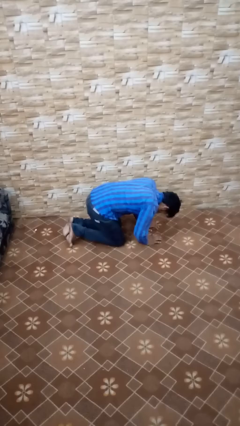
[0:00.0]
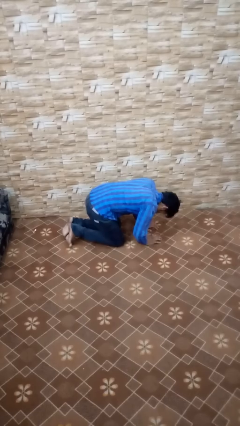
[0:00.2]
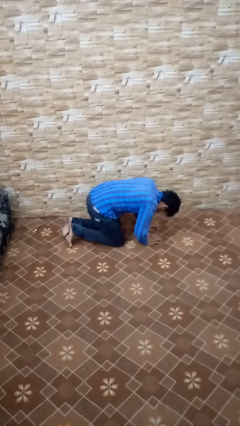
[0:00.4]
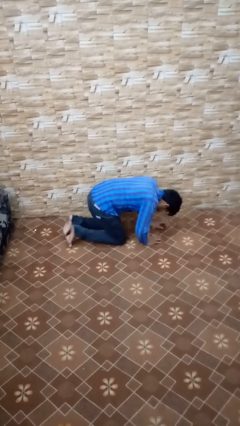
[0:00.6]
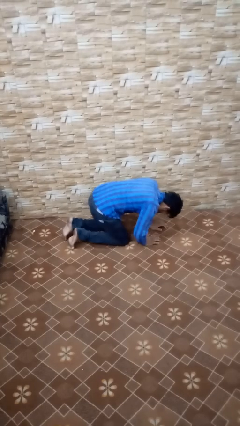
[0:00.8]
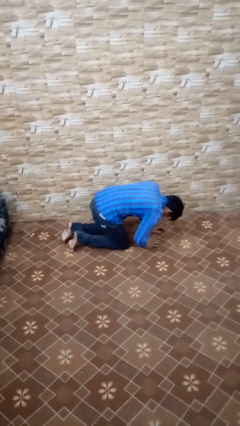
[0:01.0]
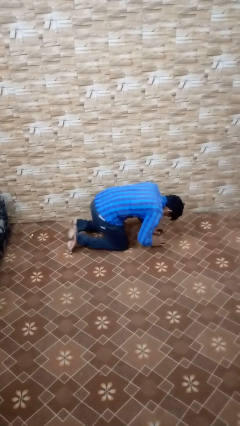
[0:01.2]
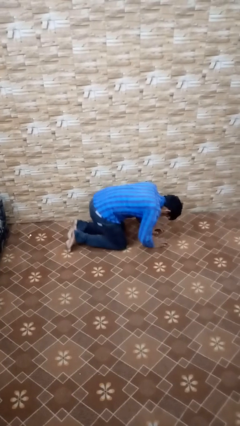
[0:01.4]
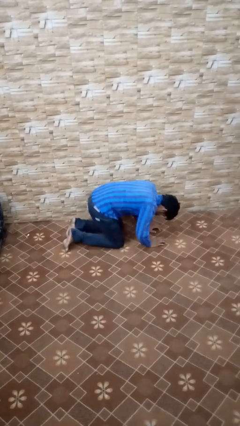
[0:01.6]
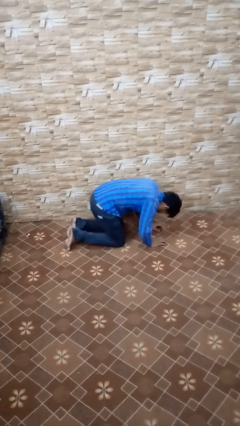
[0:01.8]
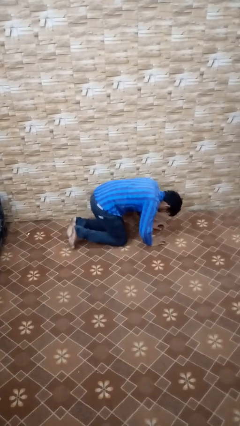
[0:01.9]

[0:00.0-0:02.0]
person crawls

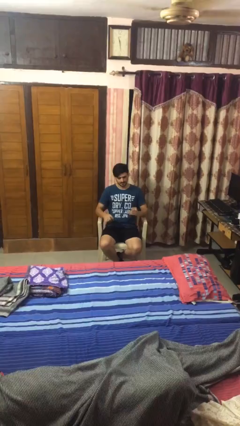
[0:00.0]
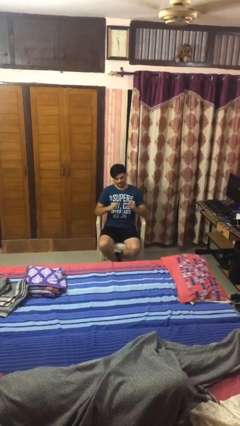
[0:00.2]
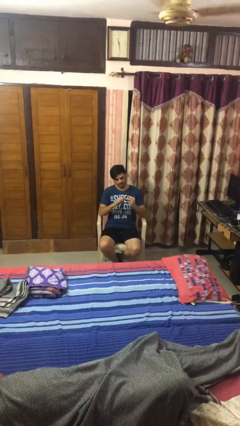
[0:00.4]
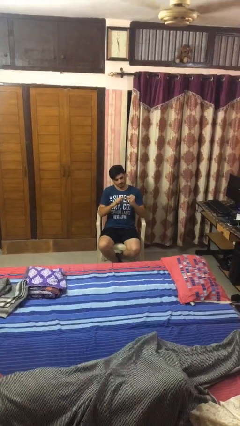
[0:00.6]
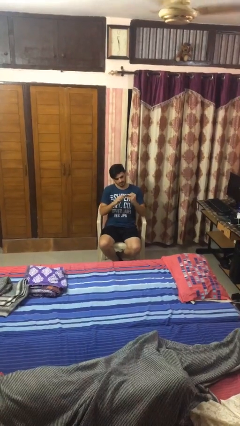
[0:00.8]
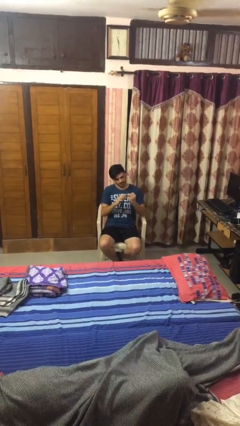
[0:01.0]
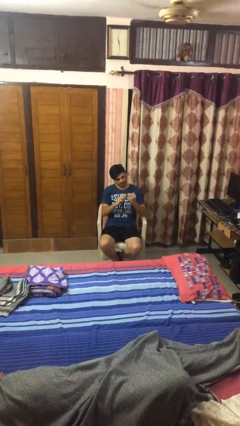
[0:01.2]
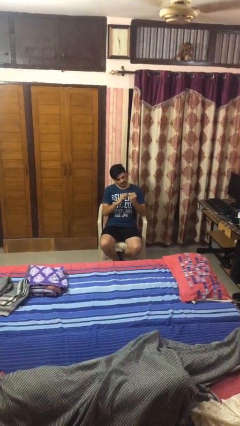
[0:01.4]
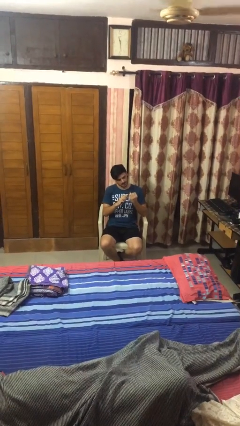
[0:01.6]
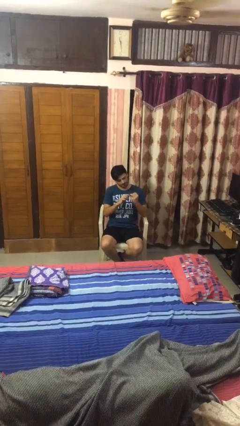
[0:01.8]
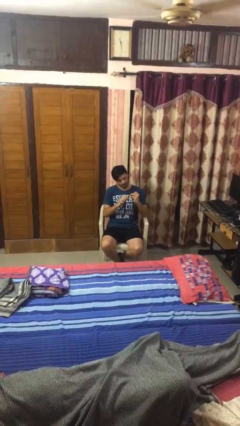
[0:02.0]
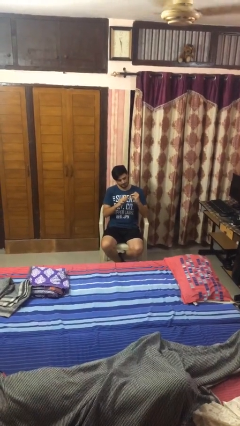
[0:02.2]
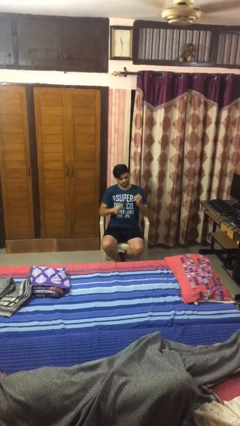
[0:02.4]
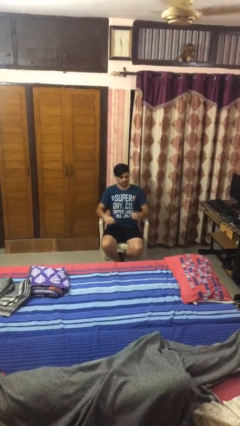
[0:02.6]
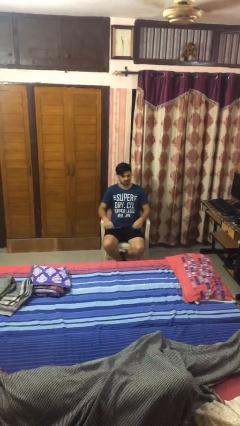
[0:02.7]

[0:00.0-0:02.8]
person files fingernails

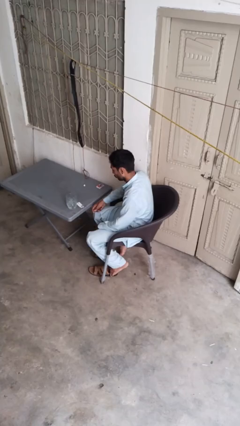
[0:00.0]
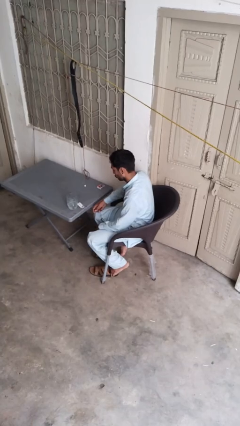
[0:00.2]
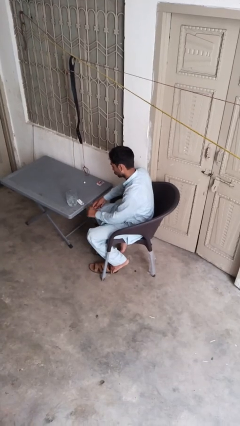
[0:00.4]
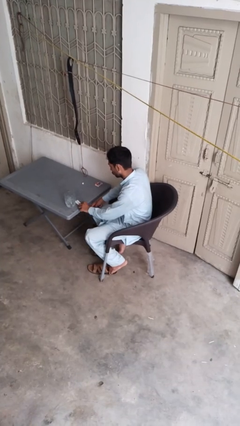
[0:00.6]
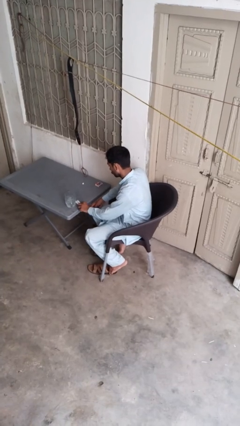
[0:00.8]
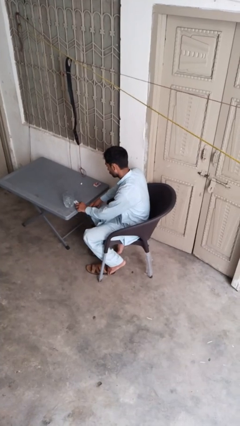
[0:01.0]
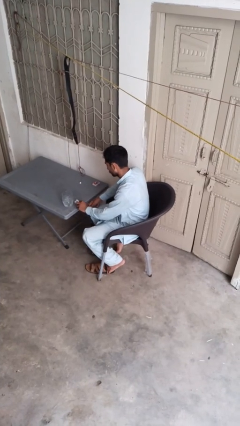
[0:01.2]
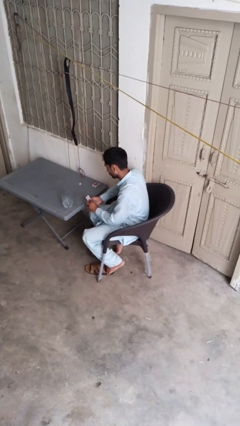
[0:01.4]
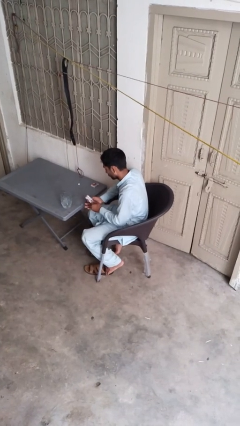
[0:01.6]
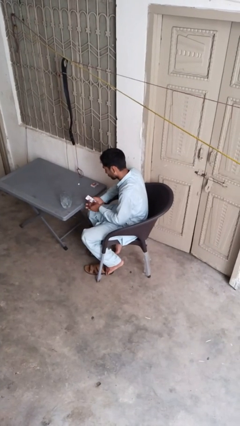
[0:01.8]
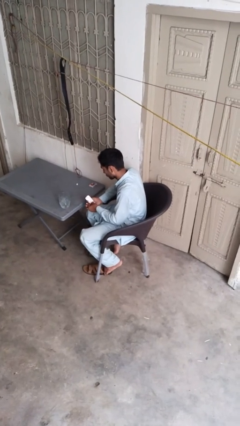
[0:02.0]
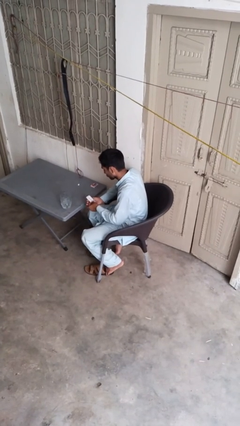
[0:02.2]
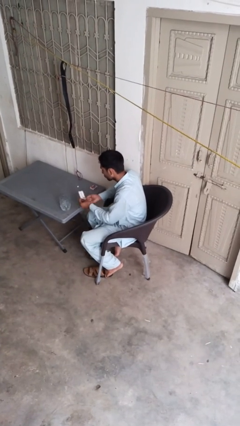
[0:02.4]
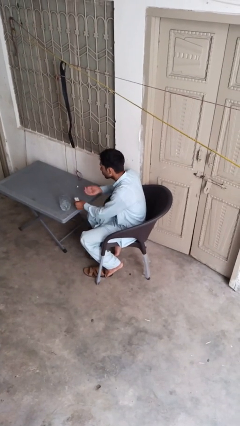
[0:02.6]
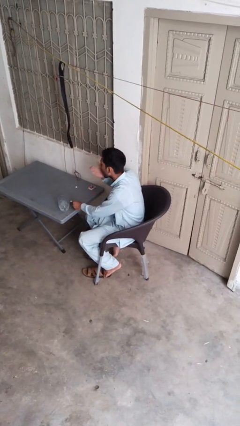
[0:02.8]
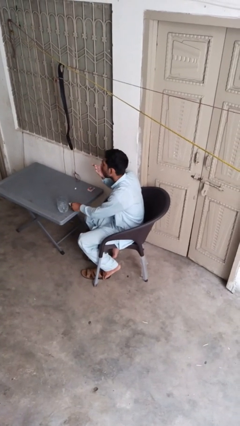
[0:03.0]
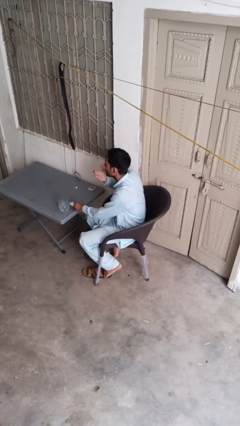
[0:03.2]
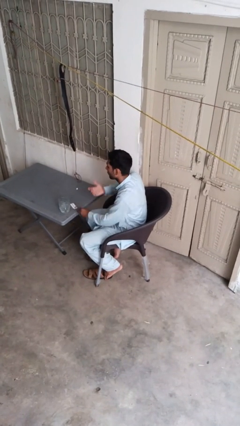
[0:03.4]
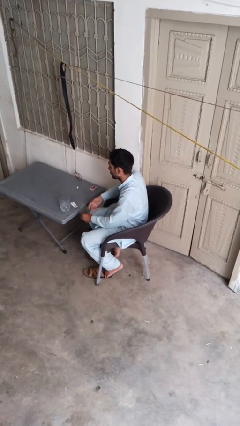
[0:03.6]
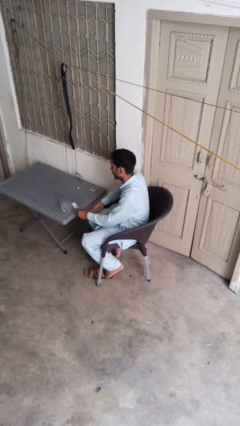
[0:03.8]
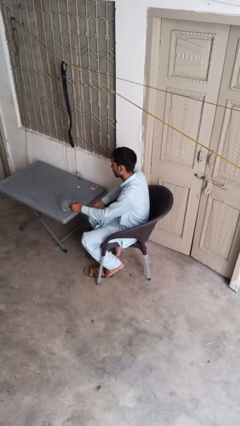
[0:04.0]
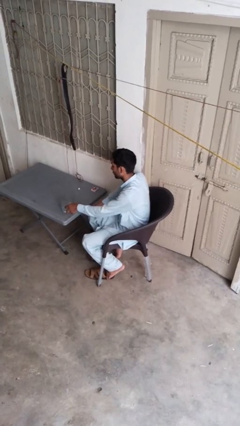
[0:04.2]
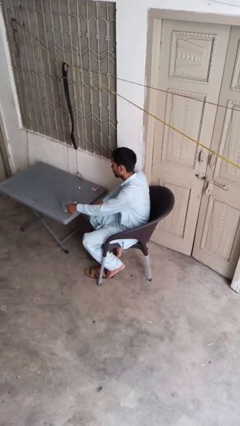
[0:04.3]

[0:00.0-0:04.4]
person takes medicine pills

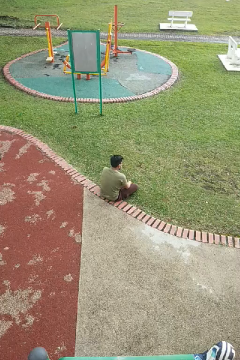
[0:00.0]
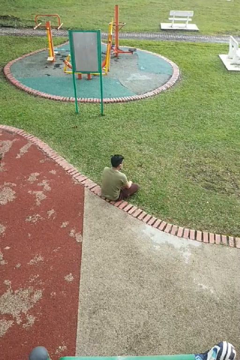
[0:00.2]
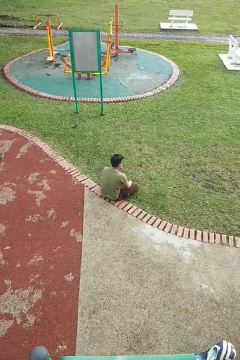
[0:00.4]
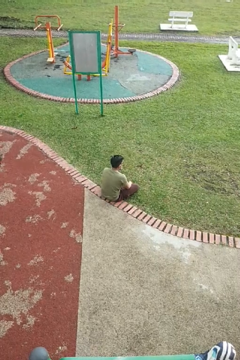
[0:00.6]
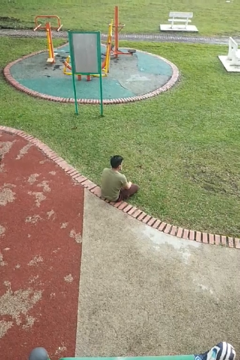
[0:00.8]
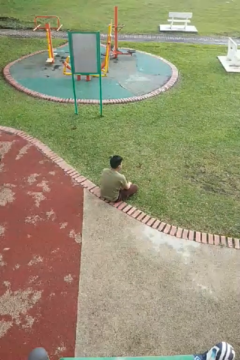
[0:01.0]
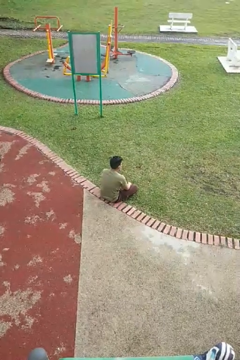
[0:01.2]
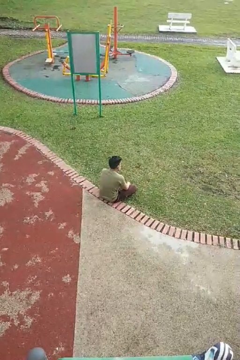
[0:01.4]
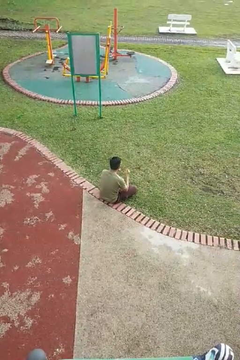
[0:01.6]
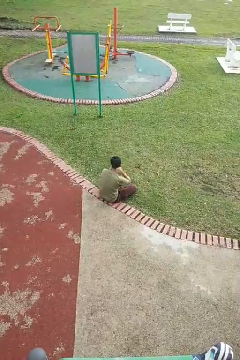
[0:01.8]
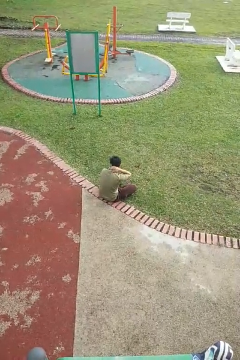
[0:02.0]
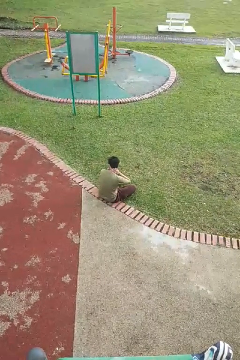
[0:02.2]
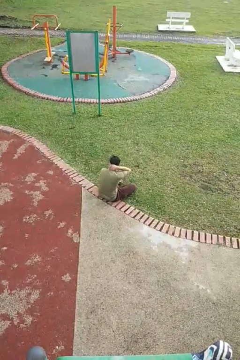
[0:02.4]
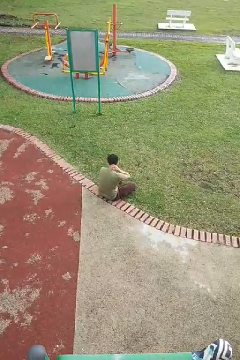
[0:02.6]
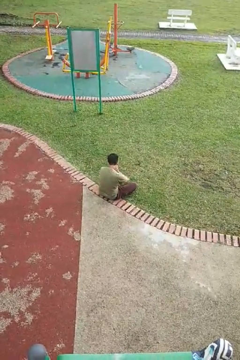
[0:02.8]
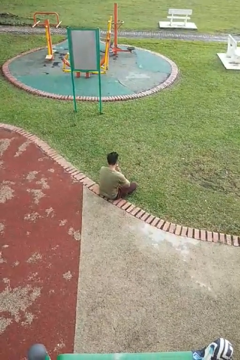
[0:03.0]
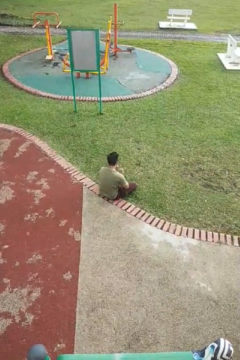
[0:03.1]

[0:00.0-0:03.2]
person rubs neck

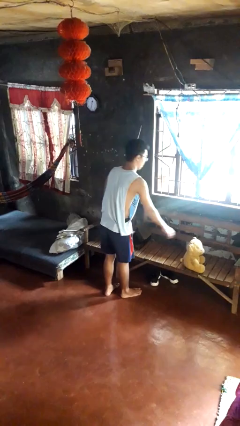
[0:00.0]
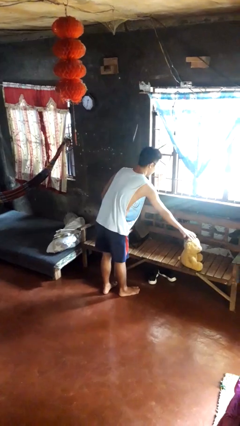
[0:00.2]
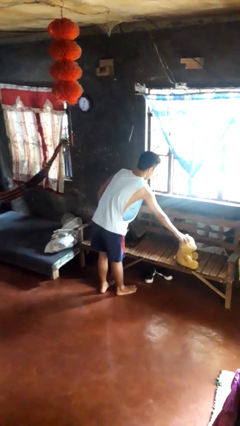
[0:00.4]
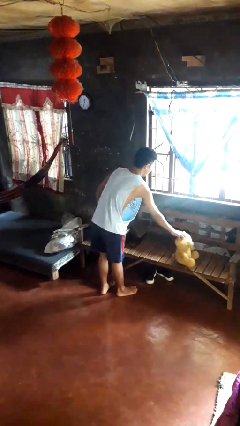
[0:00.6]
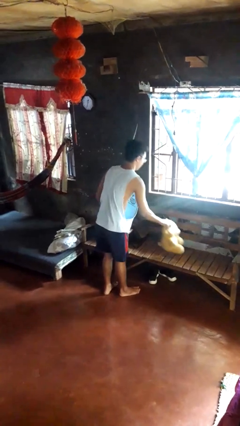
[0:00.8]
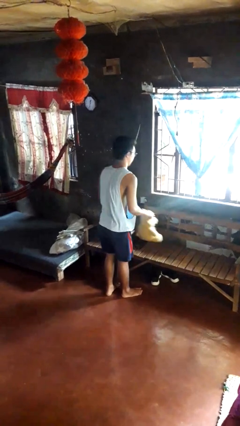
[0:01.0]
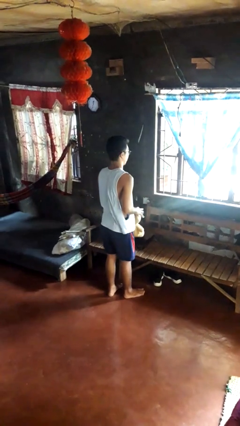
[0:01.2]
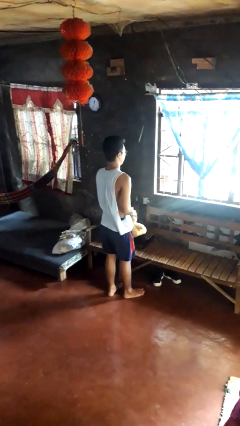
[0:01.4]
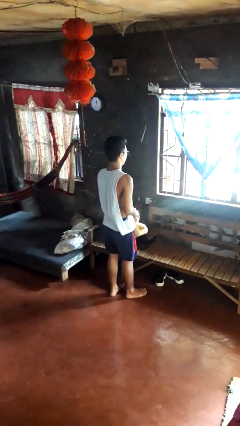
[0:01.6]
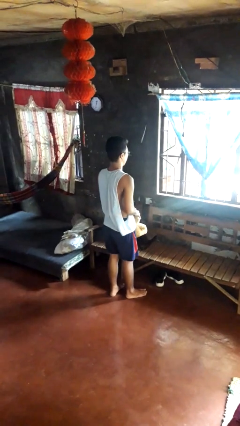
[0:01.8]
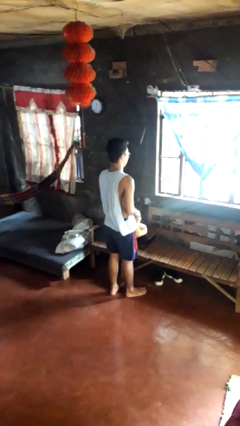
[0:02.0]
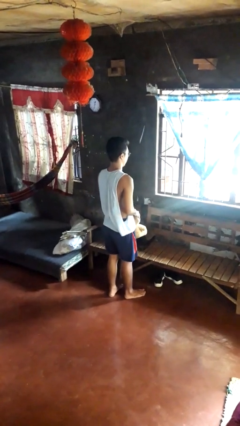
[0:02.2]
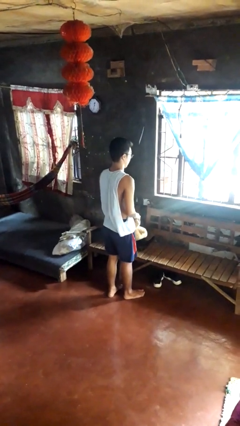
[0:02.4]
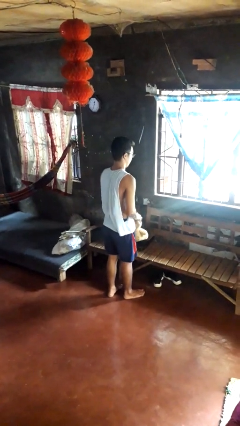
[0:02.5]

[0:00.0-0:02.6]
person picks up object from couch

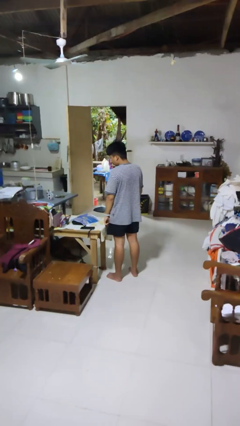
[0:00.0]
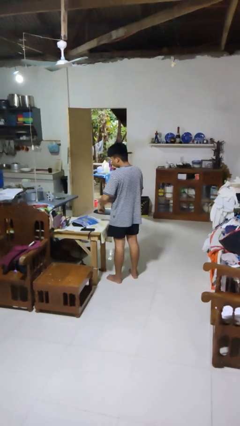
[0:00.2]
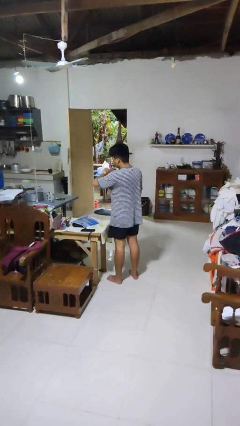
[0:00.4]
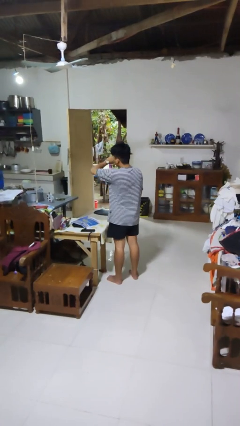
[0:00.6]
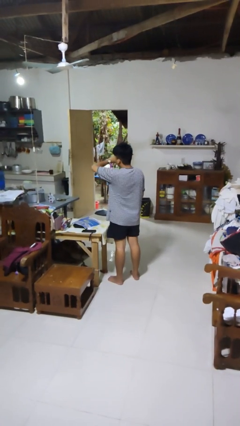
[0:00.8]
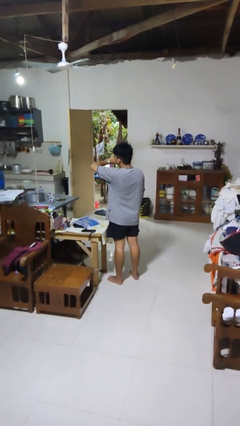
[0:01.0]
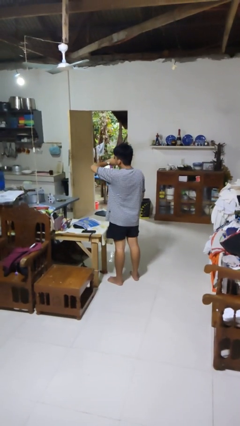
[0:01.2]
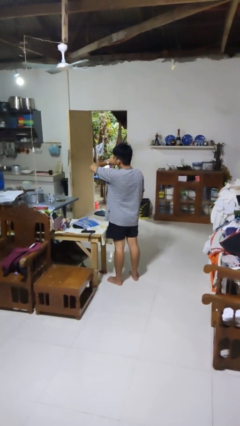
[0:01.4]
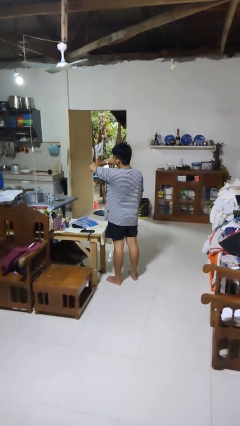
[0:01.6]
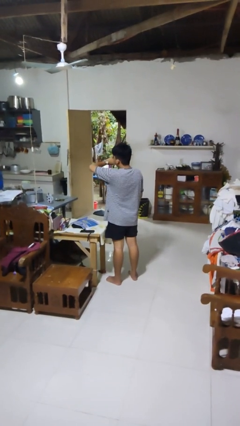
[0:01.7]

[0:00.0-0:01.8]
person looks at wristwatch

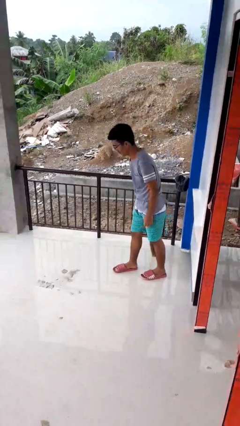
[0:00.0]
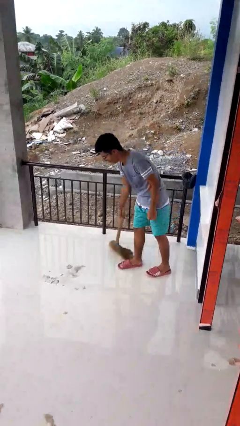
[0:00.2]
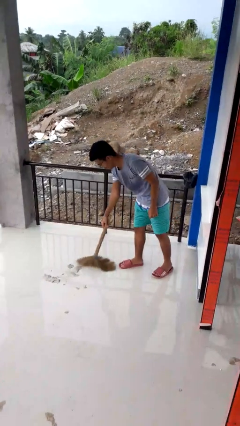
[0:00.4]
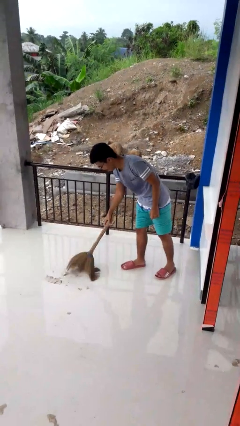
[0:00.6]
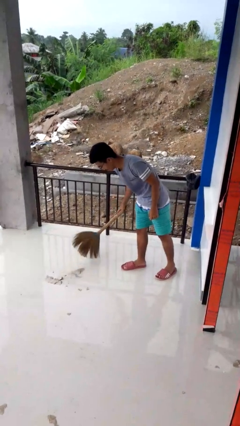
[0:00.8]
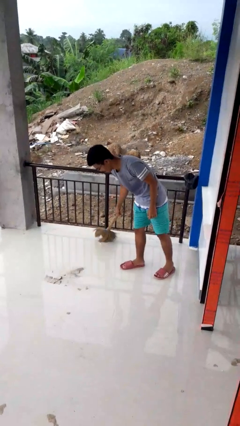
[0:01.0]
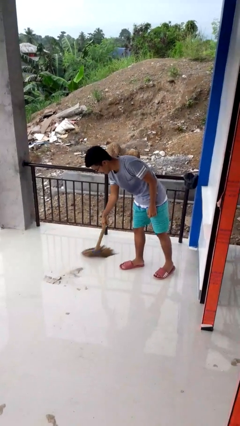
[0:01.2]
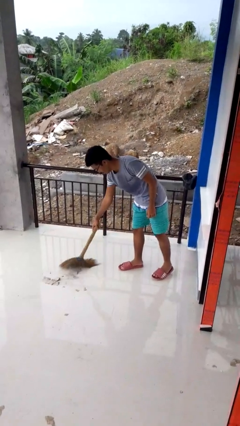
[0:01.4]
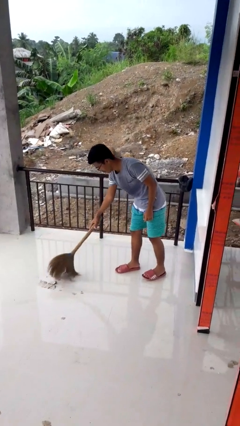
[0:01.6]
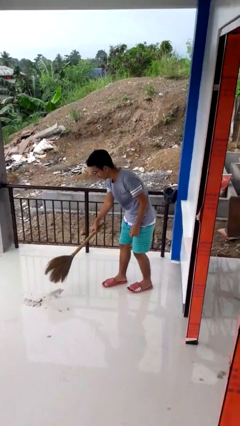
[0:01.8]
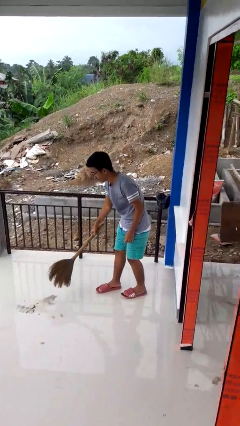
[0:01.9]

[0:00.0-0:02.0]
person sweeps floor
